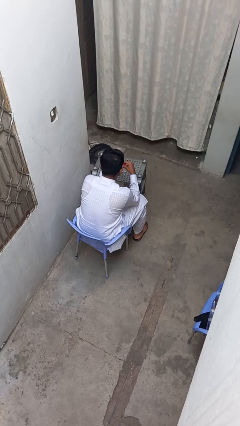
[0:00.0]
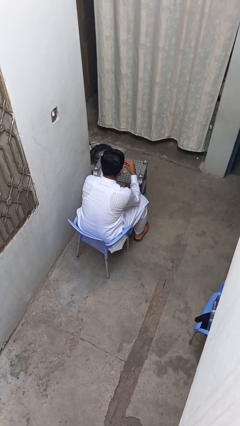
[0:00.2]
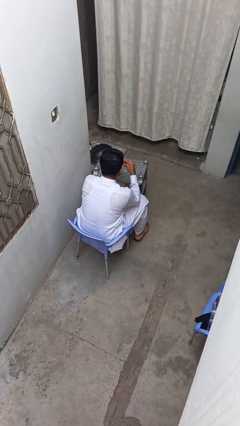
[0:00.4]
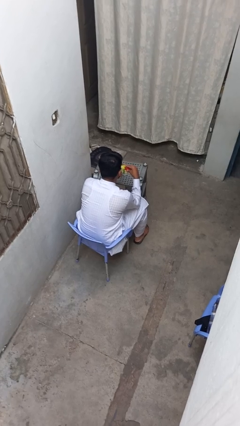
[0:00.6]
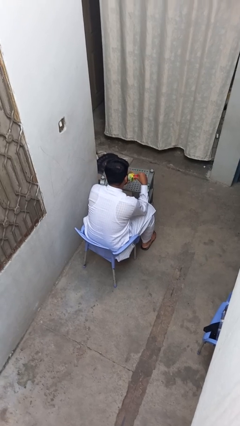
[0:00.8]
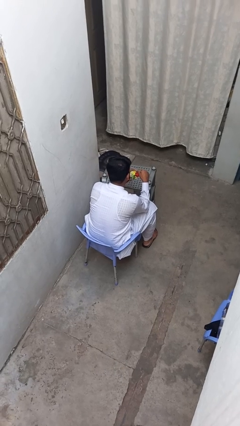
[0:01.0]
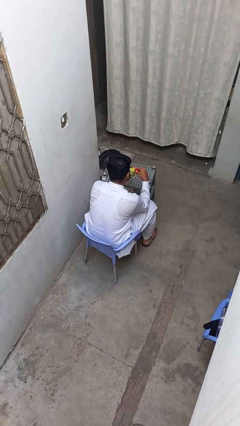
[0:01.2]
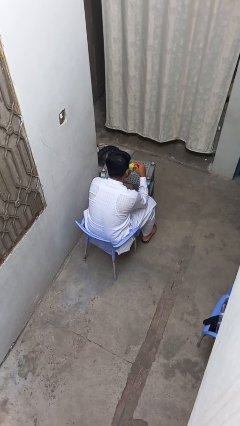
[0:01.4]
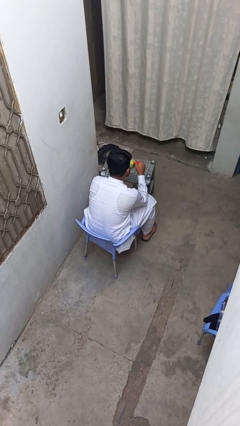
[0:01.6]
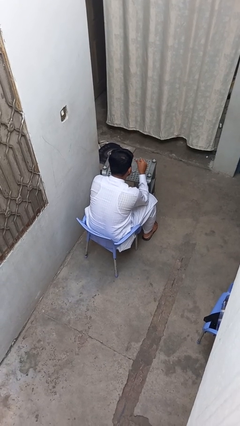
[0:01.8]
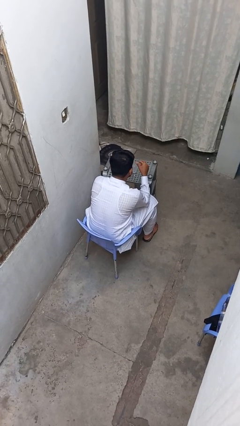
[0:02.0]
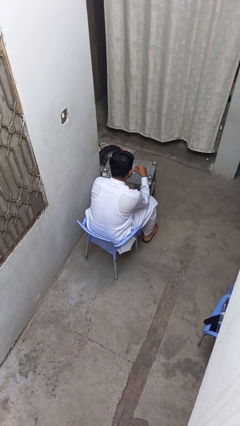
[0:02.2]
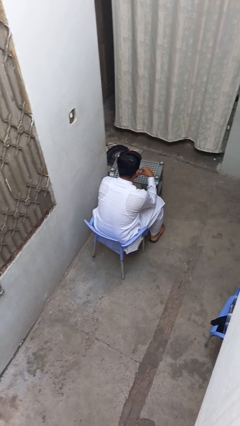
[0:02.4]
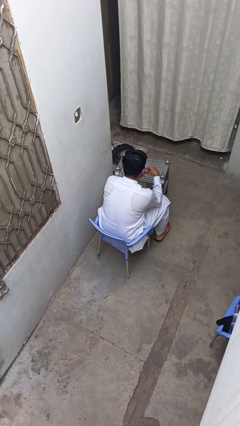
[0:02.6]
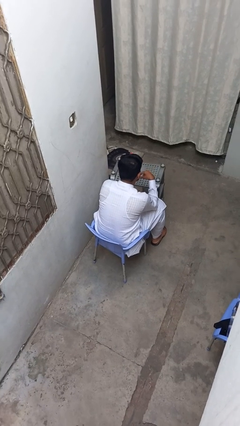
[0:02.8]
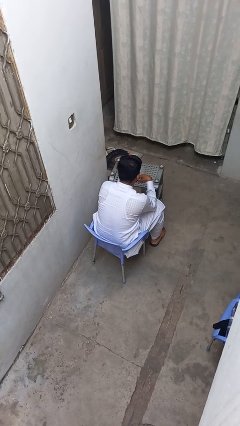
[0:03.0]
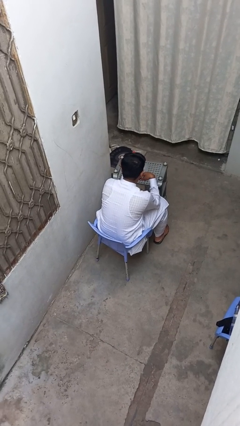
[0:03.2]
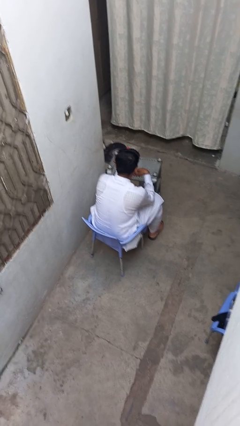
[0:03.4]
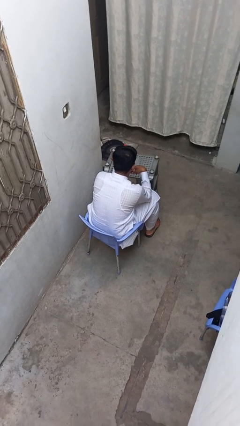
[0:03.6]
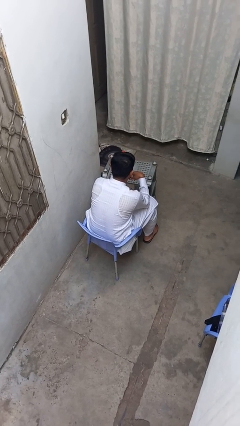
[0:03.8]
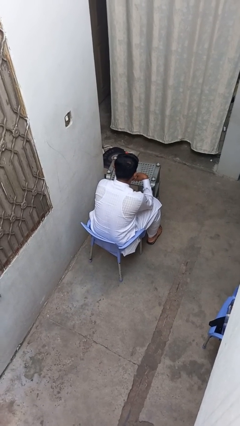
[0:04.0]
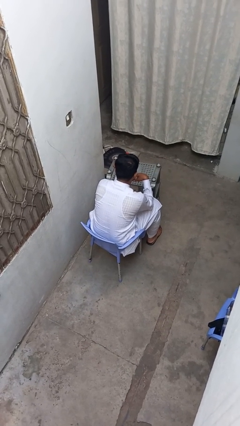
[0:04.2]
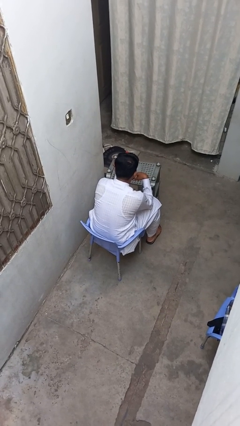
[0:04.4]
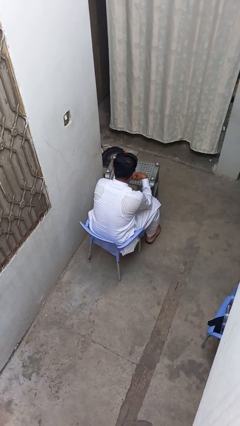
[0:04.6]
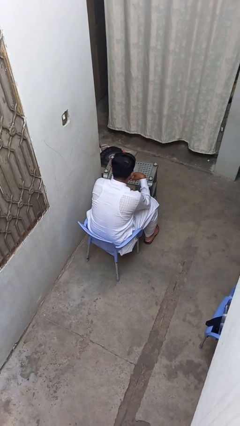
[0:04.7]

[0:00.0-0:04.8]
person screws lid to bottle

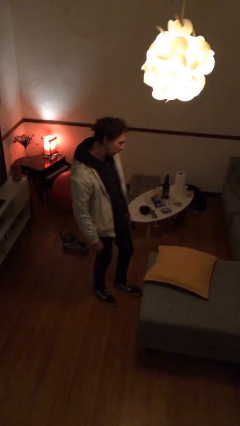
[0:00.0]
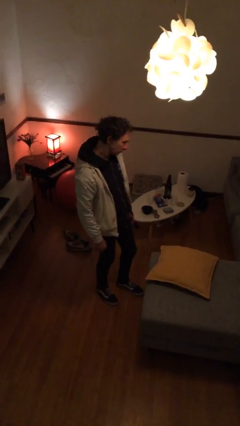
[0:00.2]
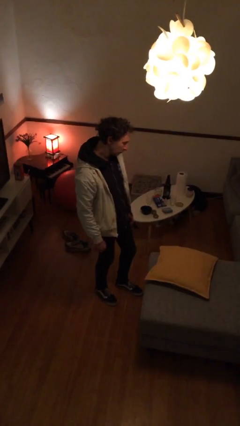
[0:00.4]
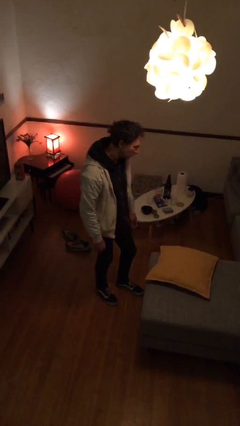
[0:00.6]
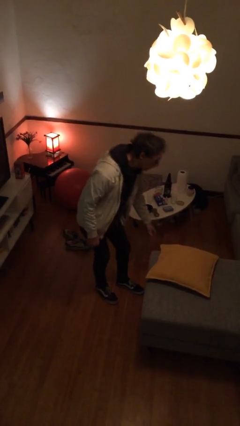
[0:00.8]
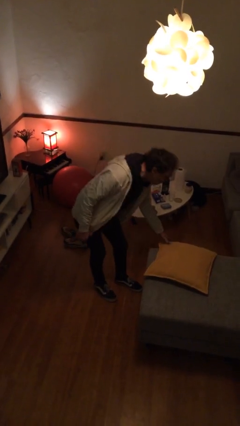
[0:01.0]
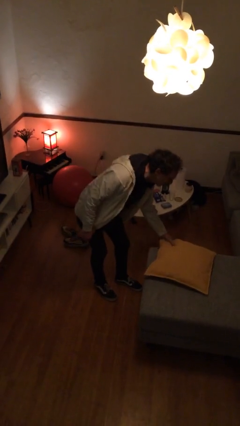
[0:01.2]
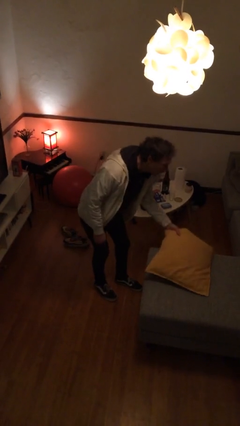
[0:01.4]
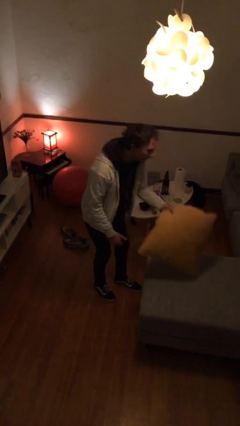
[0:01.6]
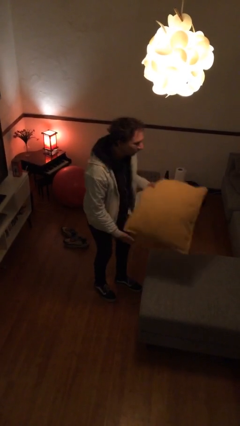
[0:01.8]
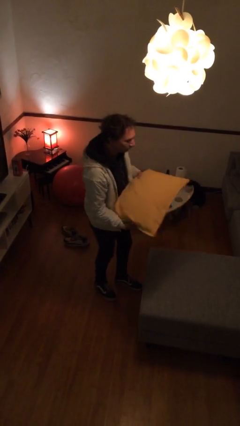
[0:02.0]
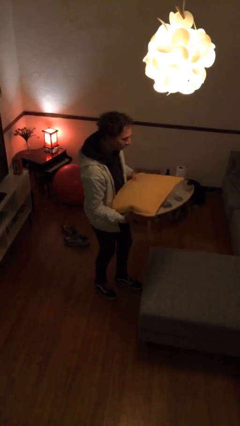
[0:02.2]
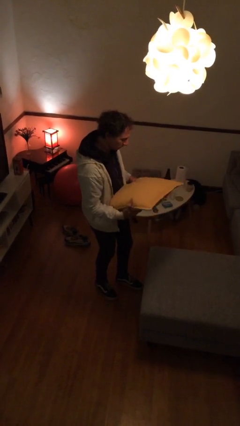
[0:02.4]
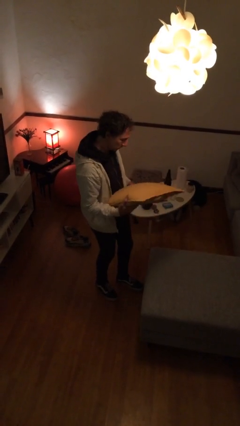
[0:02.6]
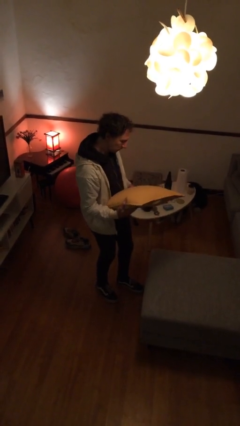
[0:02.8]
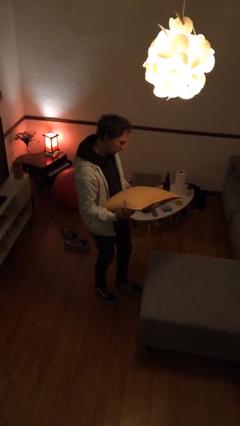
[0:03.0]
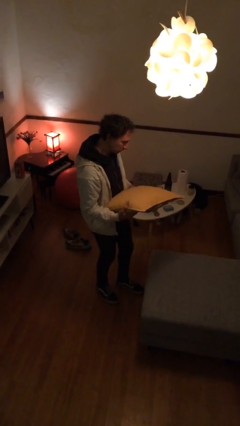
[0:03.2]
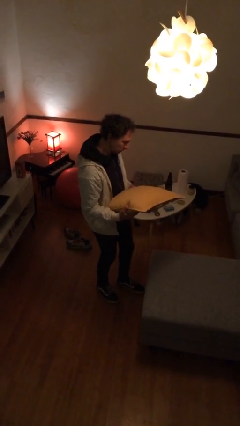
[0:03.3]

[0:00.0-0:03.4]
person picks up object from couch

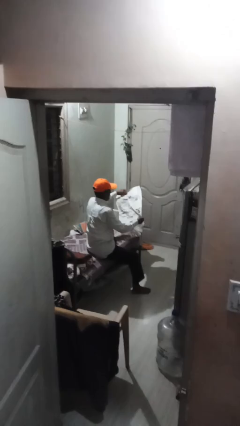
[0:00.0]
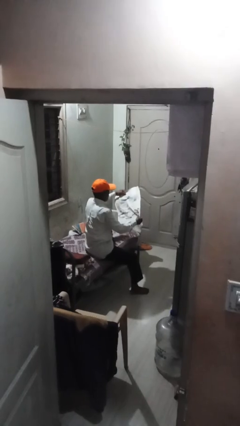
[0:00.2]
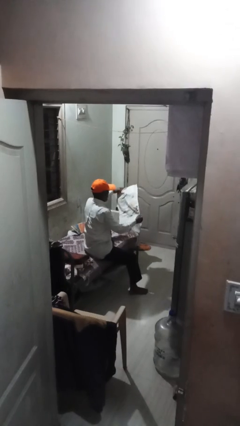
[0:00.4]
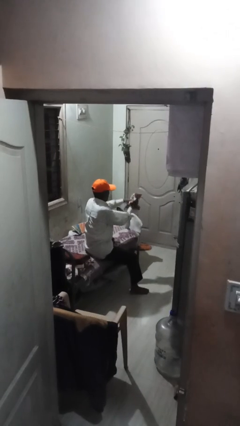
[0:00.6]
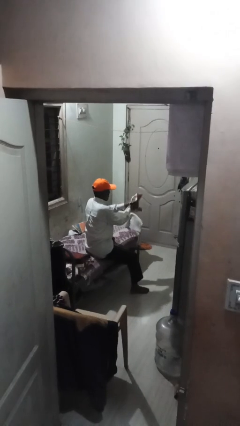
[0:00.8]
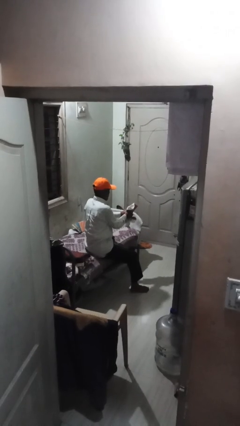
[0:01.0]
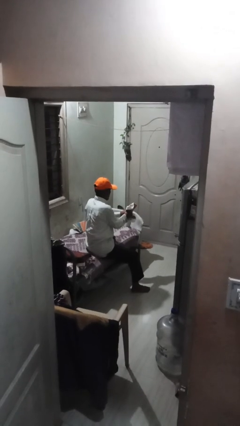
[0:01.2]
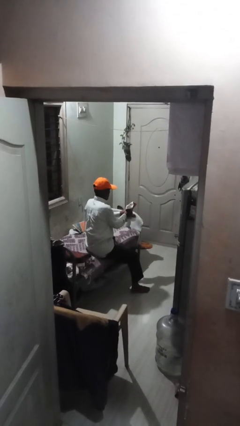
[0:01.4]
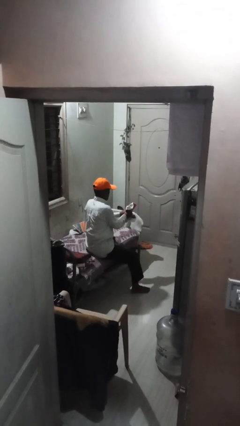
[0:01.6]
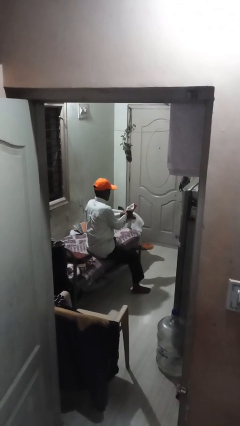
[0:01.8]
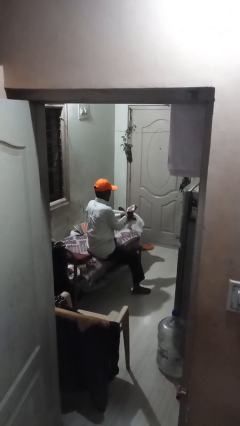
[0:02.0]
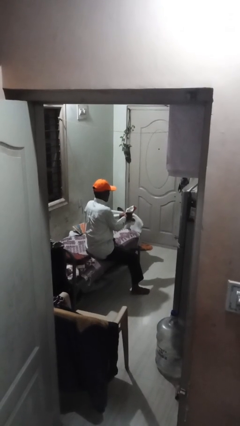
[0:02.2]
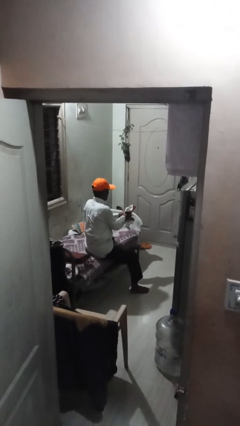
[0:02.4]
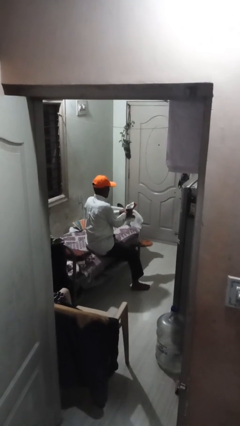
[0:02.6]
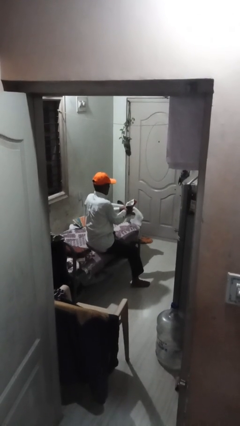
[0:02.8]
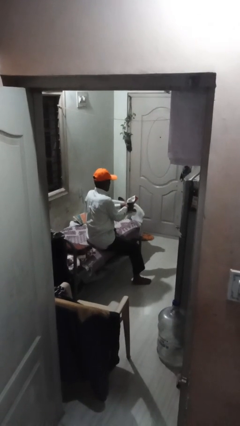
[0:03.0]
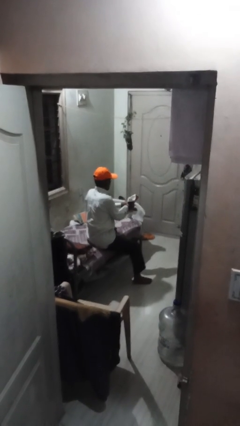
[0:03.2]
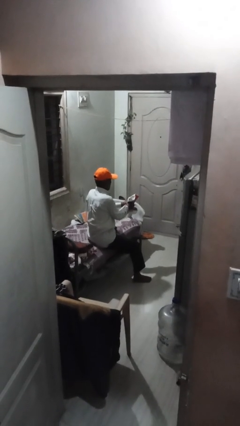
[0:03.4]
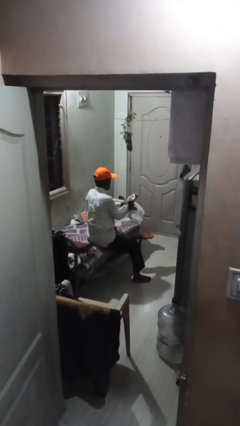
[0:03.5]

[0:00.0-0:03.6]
person crumples paper

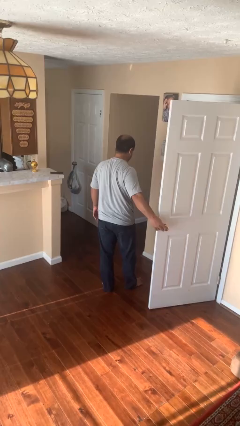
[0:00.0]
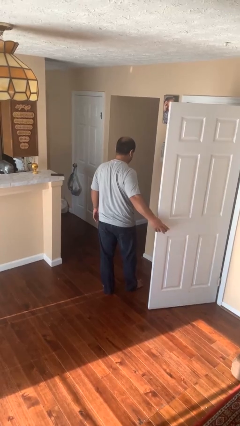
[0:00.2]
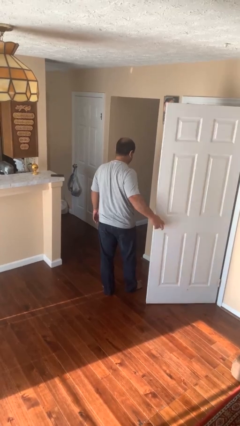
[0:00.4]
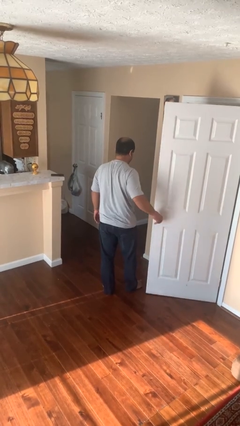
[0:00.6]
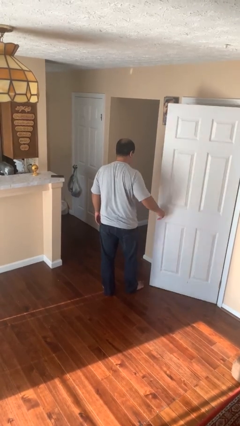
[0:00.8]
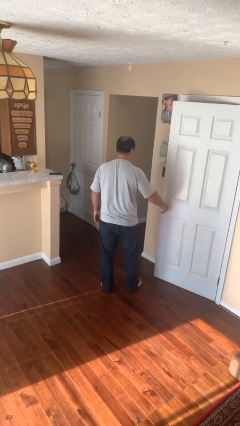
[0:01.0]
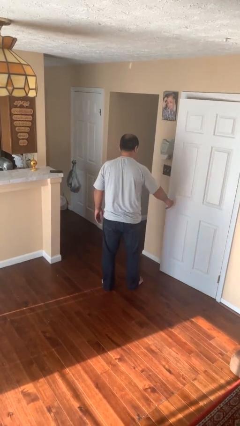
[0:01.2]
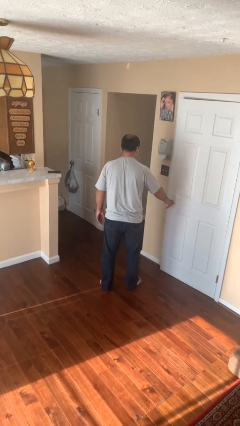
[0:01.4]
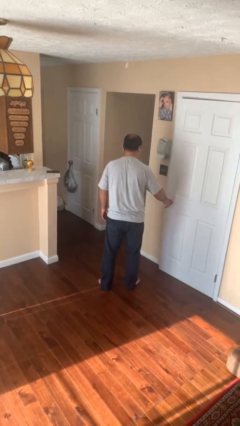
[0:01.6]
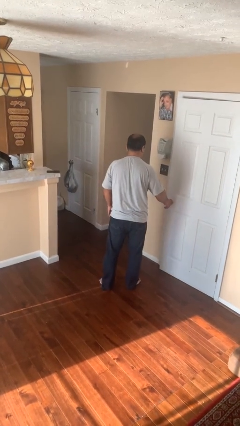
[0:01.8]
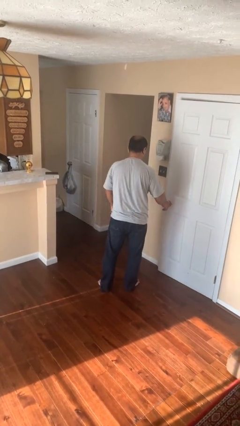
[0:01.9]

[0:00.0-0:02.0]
person closes facility door

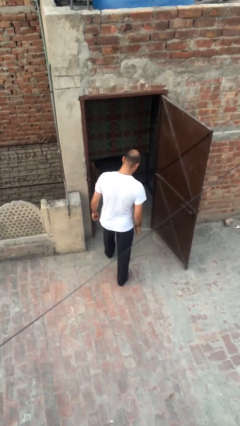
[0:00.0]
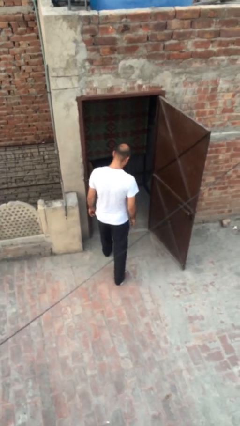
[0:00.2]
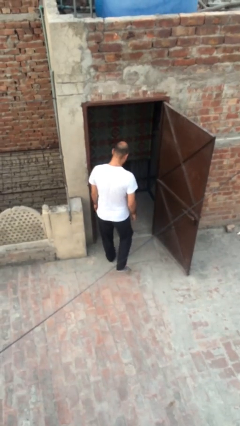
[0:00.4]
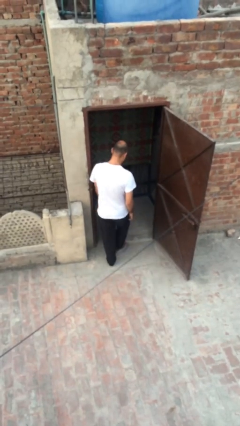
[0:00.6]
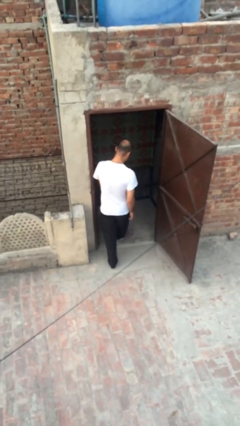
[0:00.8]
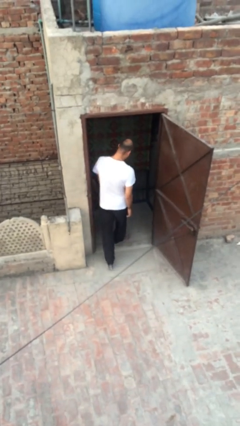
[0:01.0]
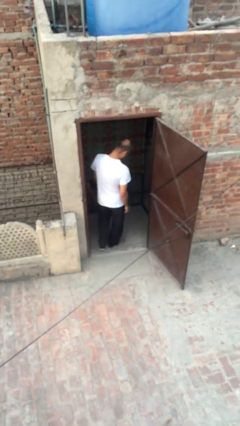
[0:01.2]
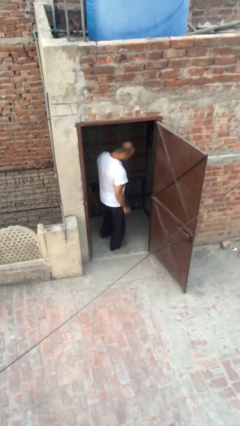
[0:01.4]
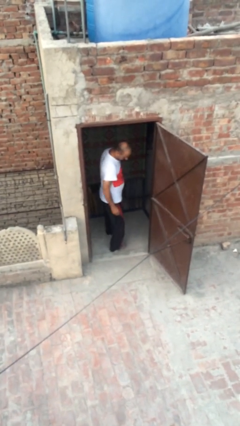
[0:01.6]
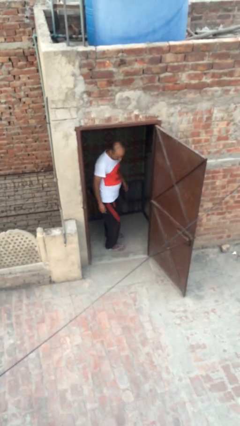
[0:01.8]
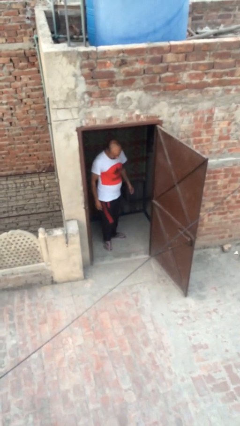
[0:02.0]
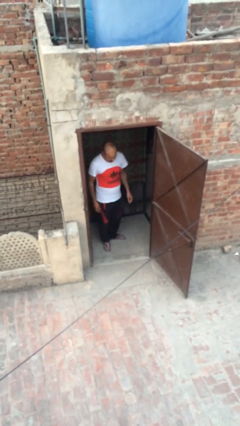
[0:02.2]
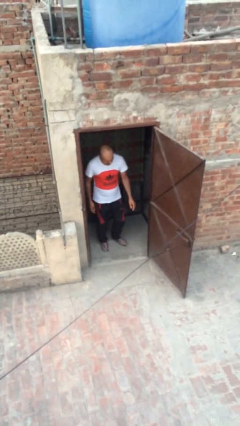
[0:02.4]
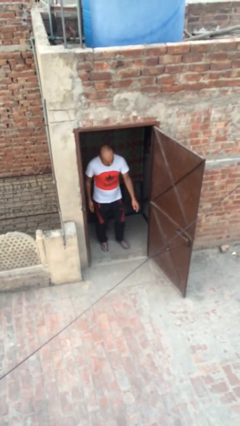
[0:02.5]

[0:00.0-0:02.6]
person exits scene through structure

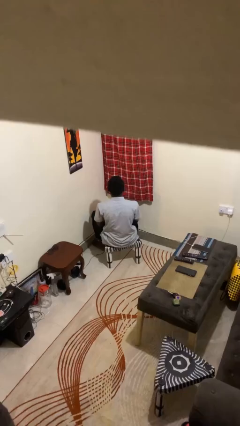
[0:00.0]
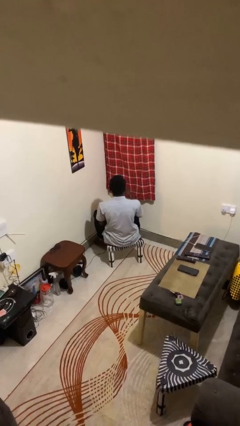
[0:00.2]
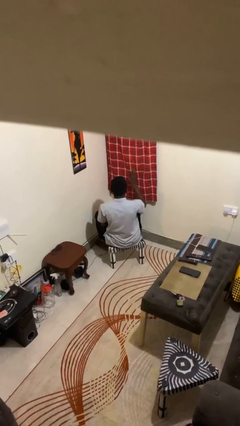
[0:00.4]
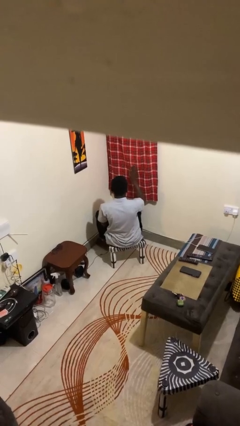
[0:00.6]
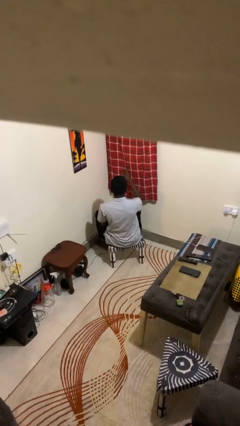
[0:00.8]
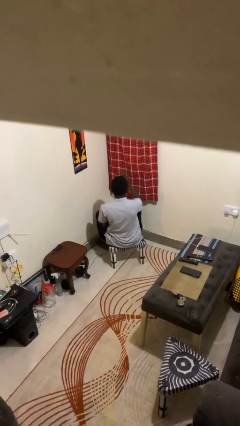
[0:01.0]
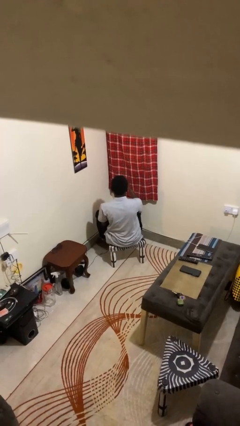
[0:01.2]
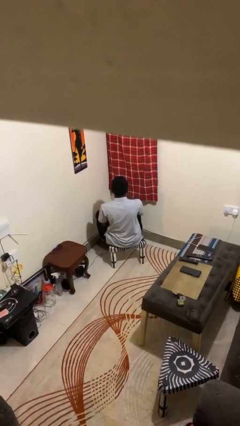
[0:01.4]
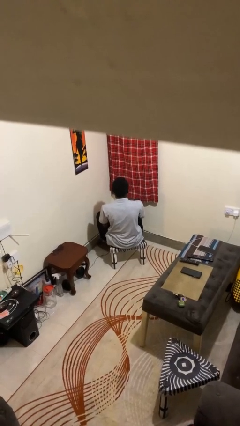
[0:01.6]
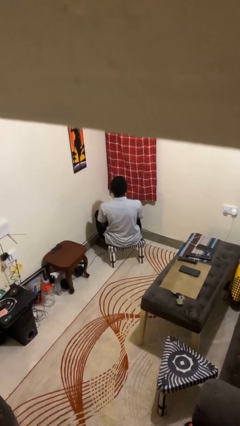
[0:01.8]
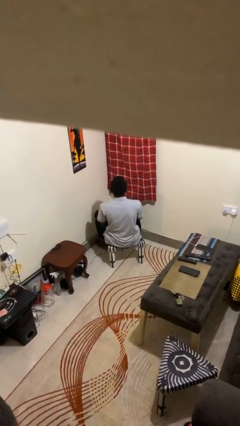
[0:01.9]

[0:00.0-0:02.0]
person gestures swipe left
